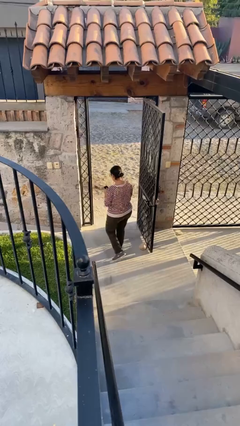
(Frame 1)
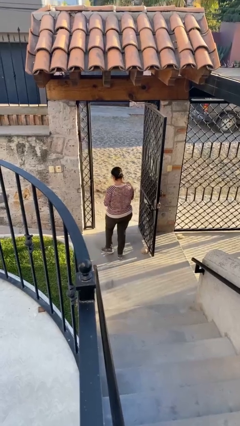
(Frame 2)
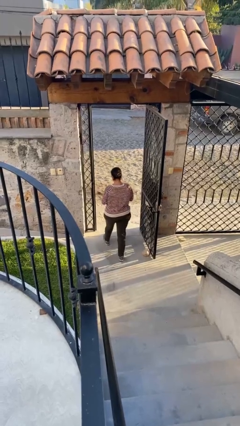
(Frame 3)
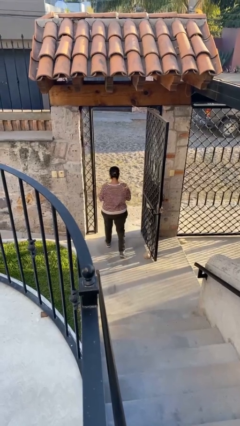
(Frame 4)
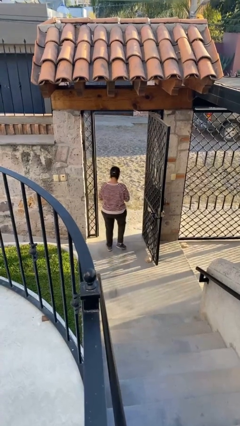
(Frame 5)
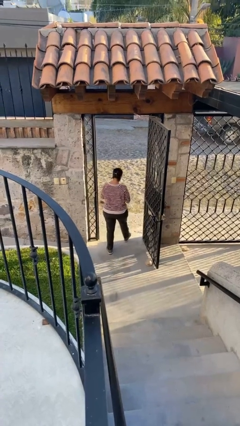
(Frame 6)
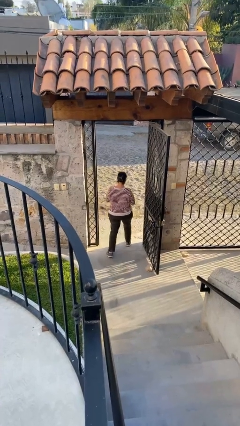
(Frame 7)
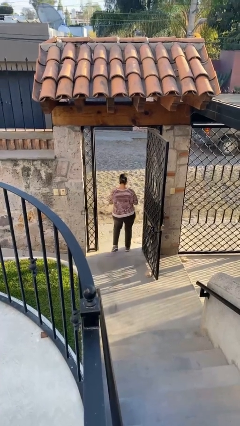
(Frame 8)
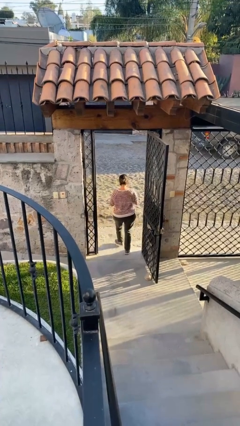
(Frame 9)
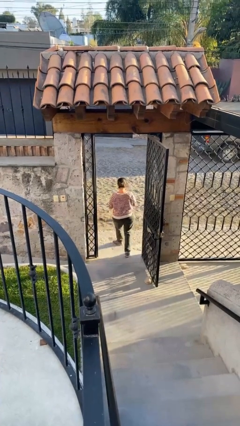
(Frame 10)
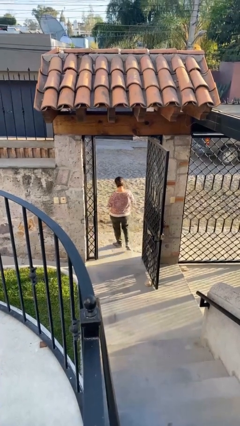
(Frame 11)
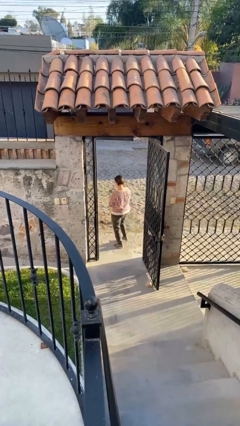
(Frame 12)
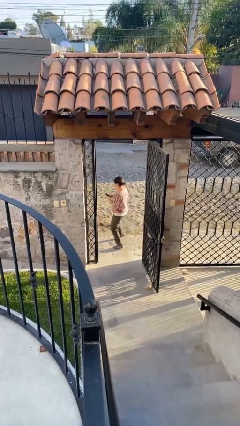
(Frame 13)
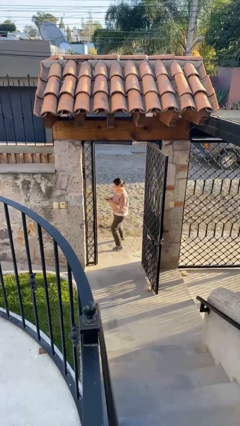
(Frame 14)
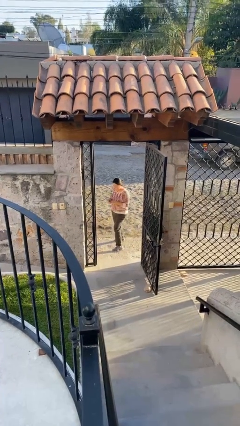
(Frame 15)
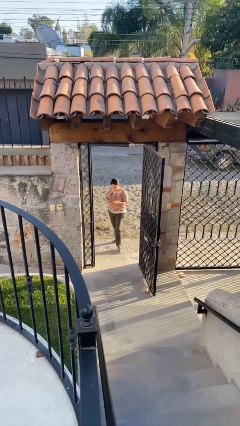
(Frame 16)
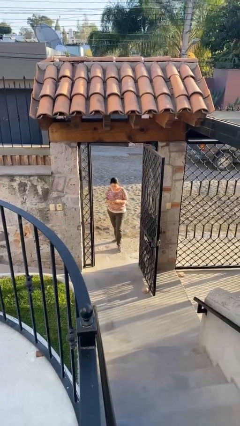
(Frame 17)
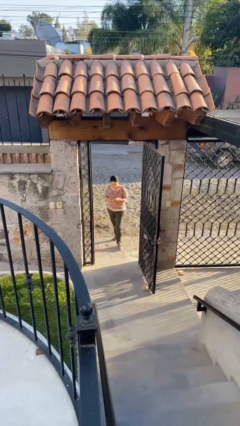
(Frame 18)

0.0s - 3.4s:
person exits scene through structure

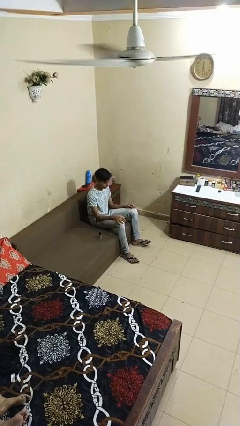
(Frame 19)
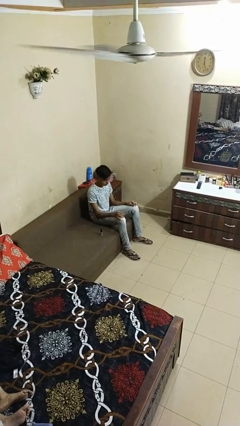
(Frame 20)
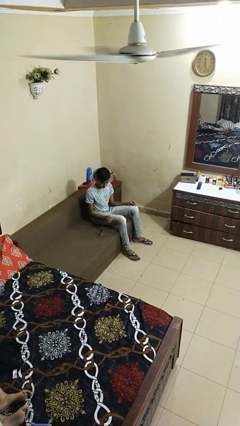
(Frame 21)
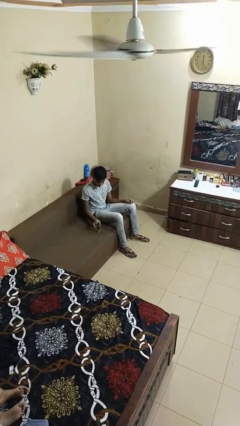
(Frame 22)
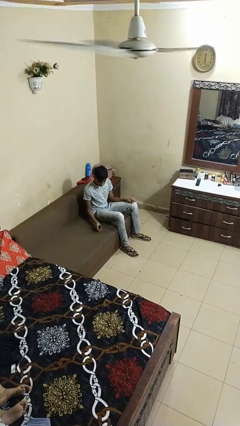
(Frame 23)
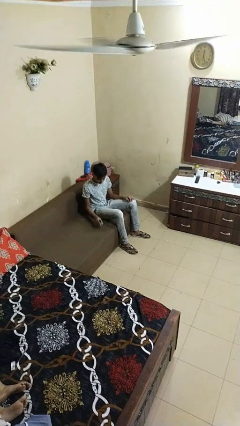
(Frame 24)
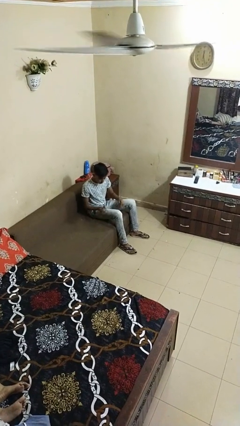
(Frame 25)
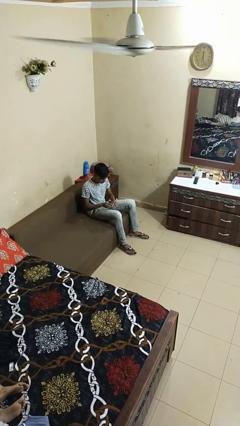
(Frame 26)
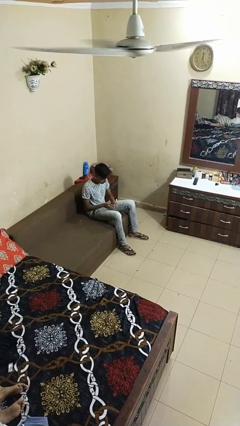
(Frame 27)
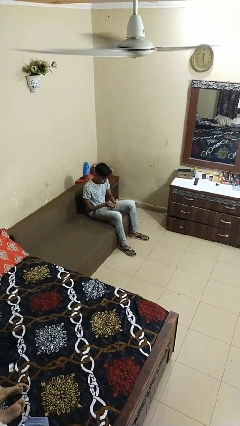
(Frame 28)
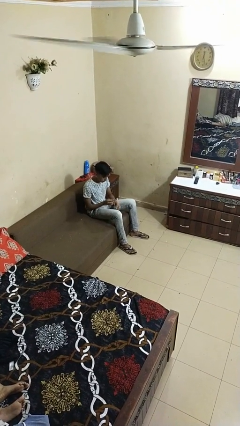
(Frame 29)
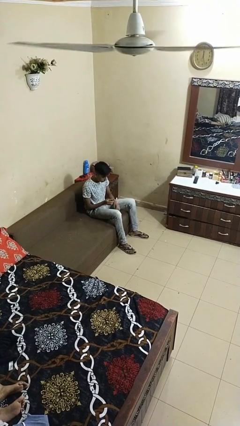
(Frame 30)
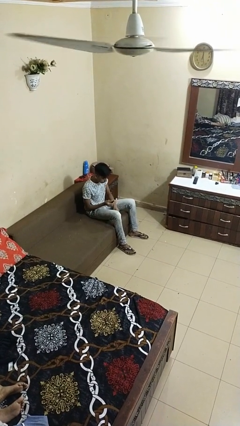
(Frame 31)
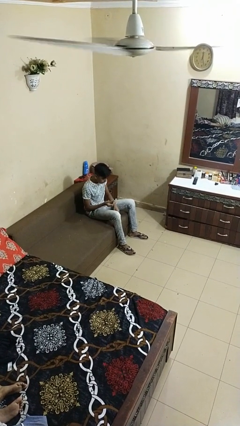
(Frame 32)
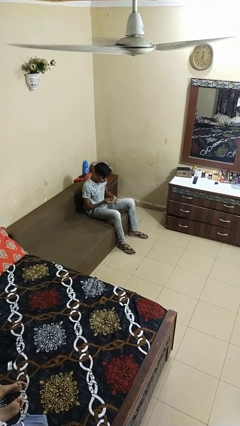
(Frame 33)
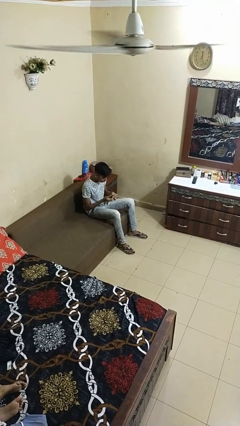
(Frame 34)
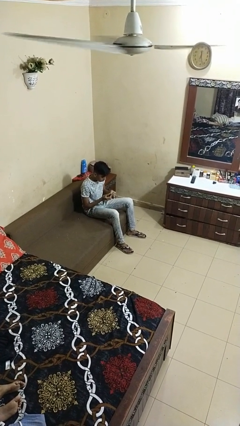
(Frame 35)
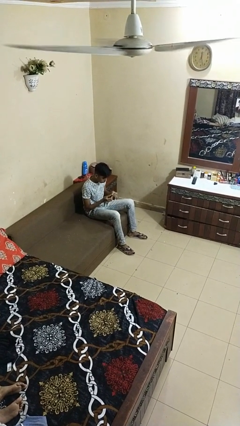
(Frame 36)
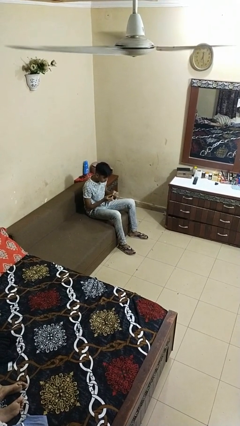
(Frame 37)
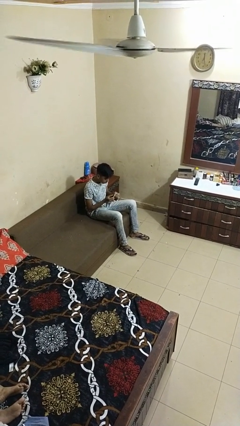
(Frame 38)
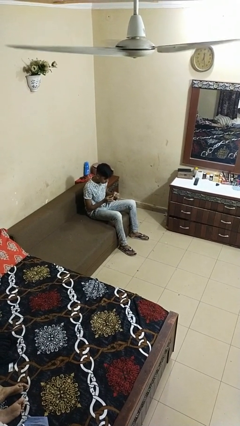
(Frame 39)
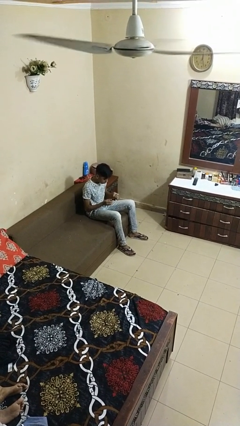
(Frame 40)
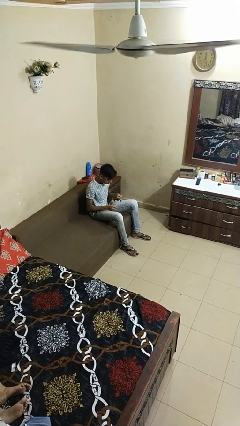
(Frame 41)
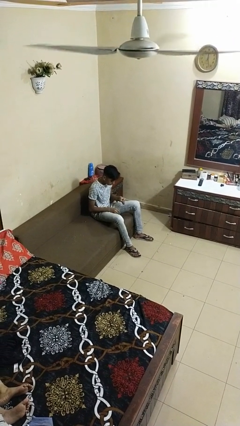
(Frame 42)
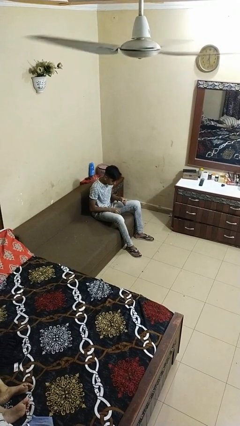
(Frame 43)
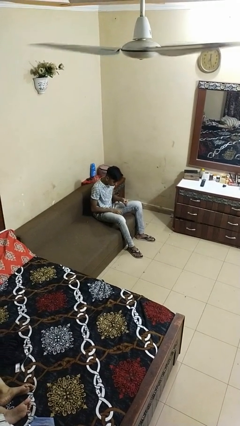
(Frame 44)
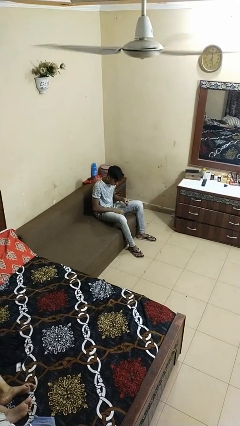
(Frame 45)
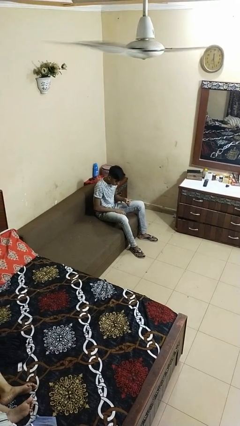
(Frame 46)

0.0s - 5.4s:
person paints fingernails

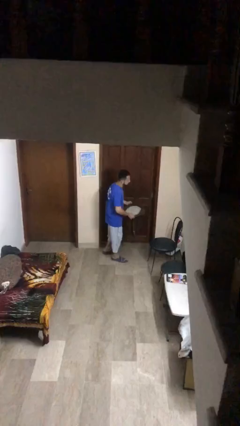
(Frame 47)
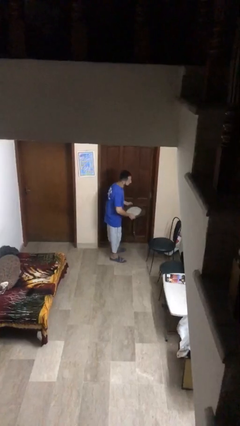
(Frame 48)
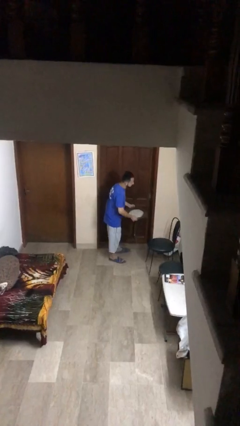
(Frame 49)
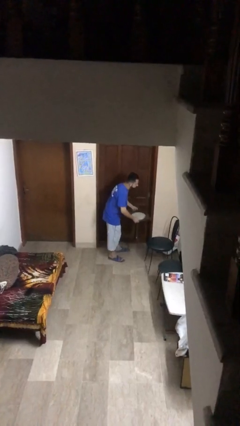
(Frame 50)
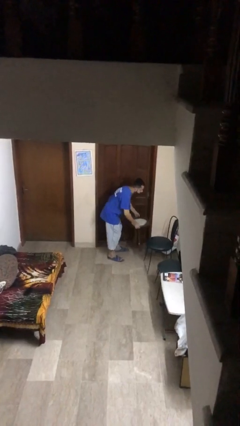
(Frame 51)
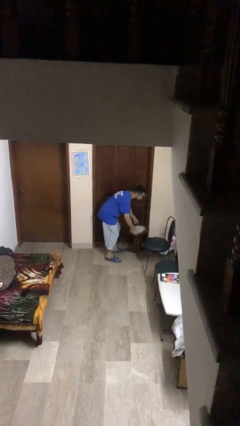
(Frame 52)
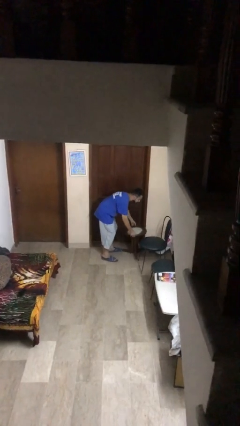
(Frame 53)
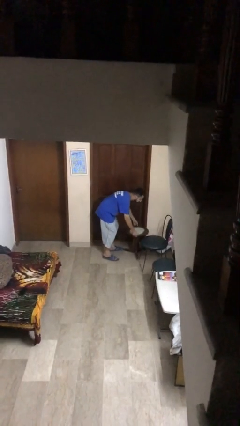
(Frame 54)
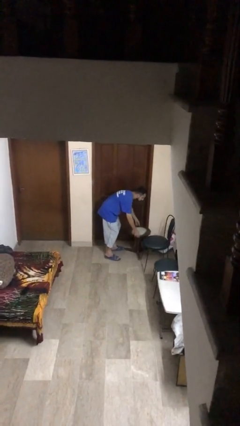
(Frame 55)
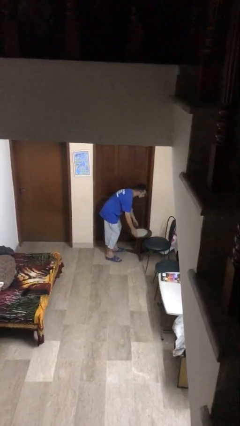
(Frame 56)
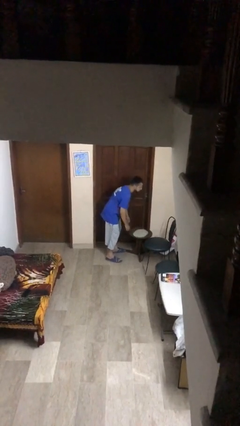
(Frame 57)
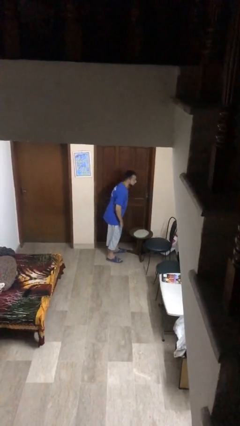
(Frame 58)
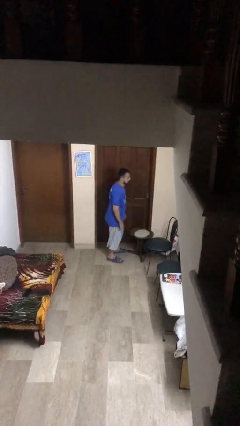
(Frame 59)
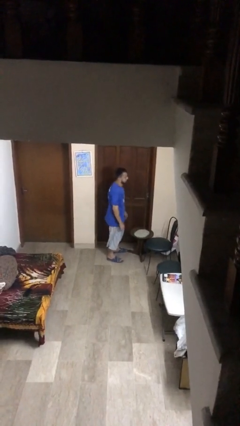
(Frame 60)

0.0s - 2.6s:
person puts down object on floor

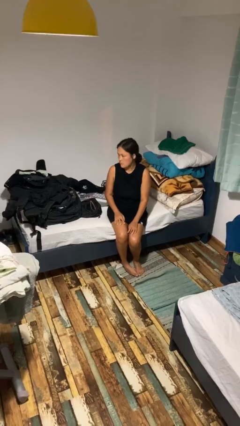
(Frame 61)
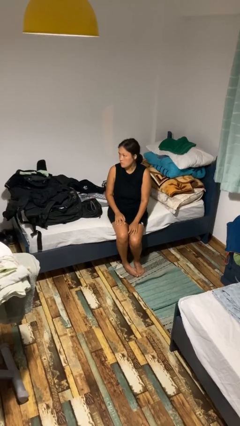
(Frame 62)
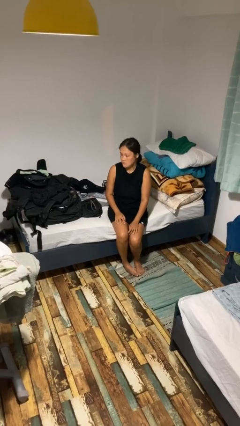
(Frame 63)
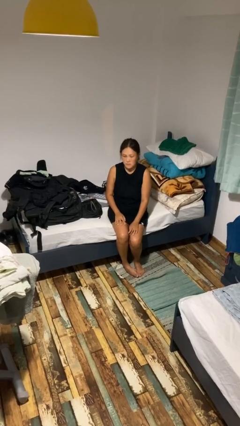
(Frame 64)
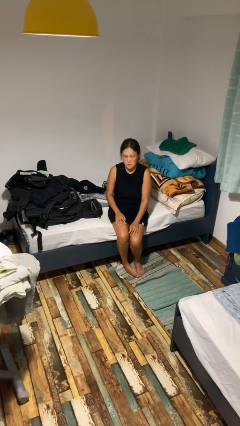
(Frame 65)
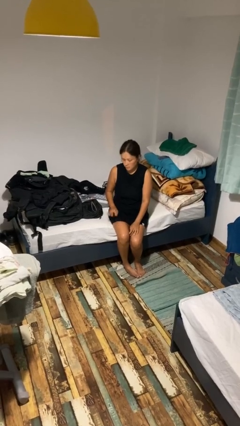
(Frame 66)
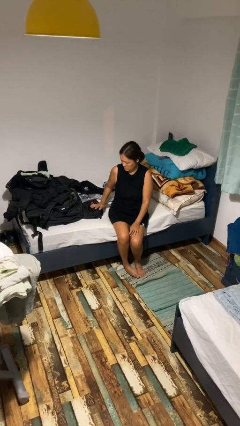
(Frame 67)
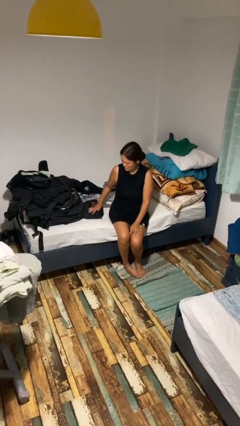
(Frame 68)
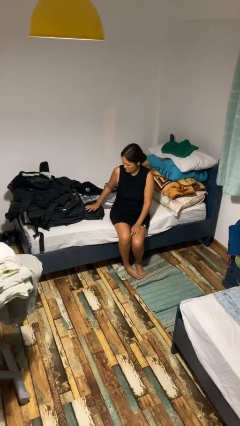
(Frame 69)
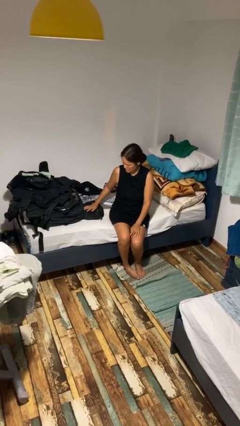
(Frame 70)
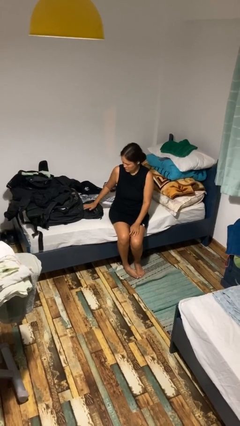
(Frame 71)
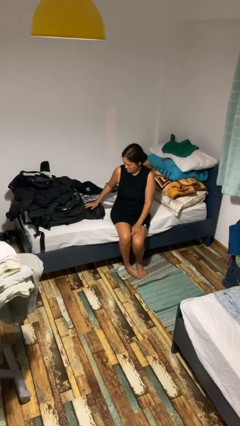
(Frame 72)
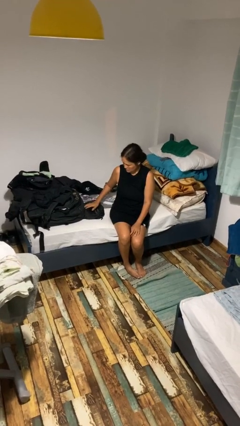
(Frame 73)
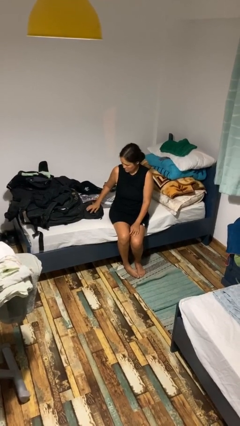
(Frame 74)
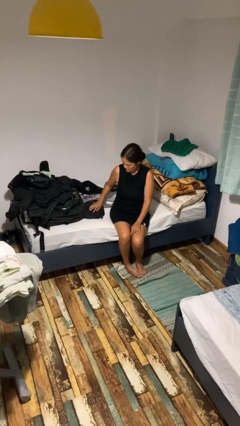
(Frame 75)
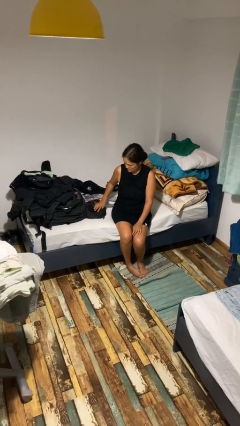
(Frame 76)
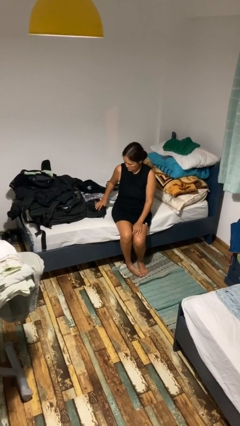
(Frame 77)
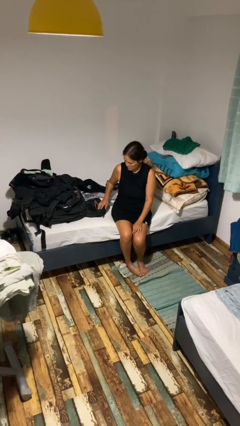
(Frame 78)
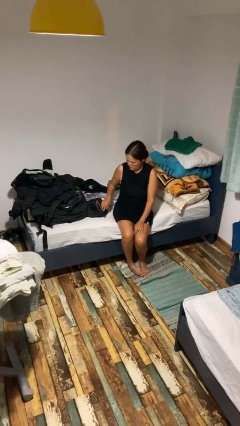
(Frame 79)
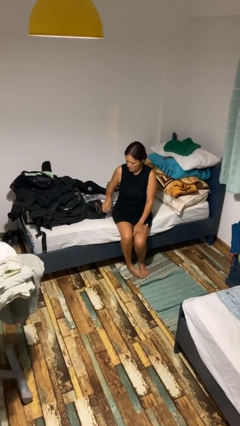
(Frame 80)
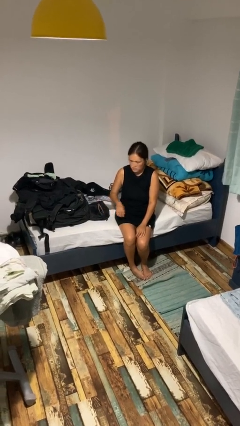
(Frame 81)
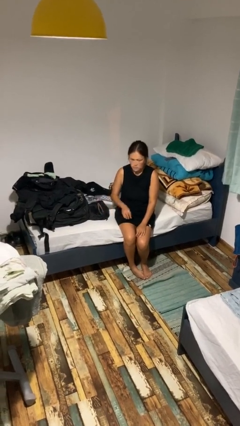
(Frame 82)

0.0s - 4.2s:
person taps object with finger

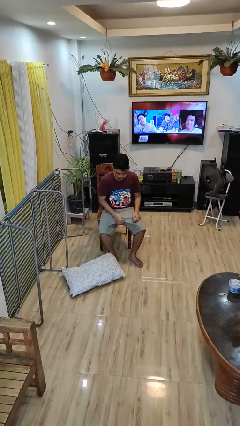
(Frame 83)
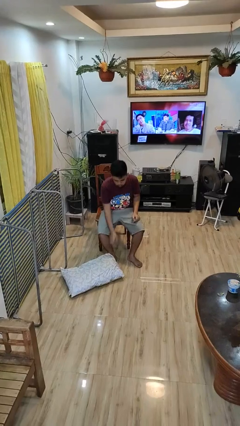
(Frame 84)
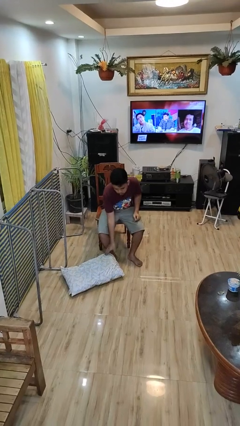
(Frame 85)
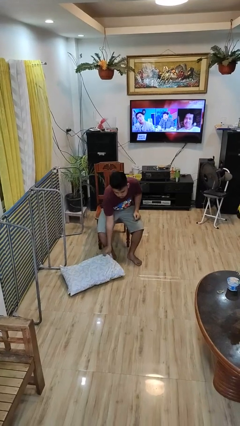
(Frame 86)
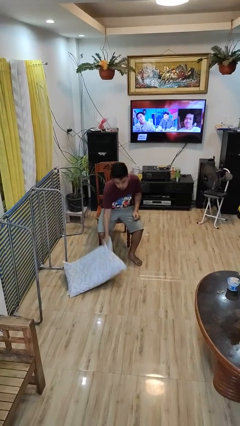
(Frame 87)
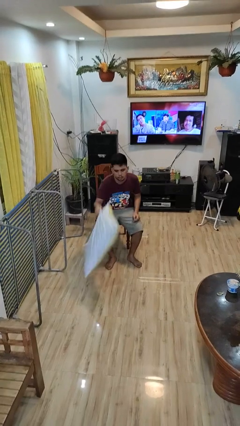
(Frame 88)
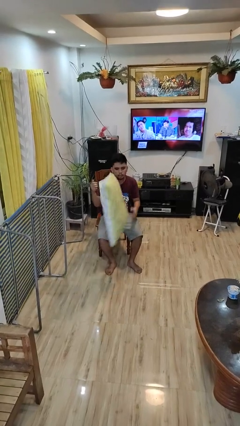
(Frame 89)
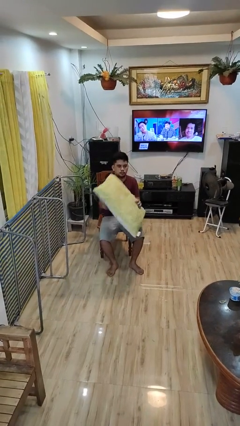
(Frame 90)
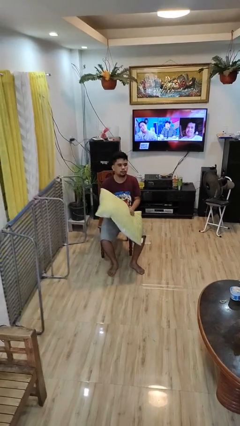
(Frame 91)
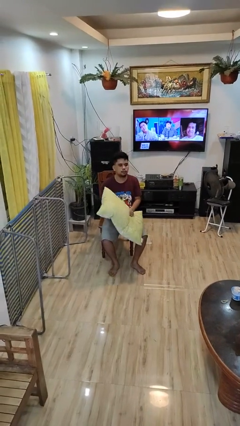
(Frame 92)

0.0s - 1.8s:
person picks up object from floor
